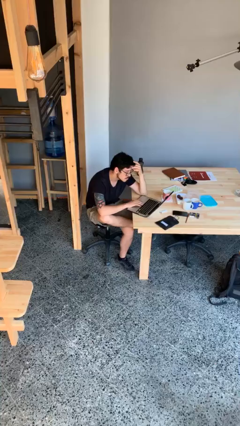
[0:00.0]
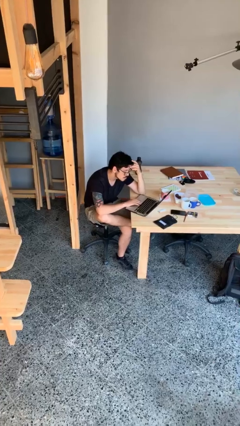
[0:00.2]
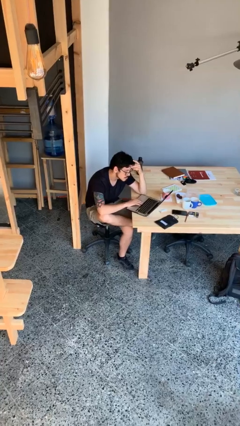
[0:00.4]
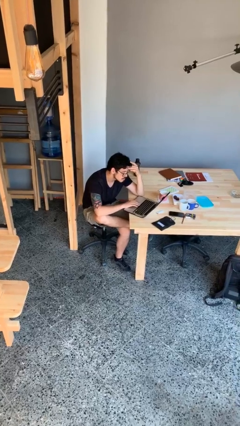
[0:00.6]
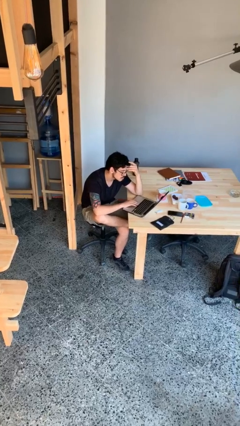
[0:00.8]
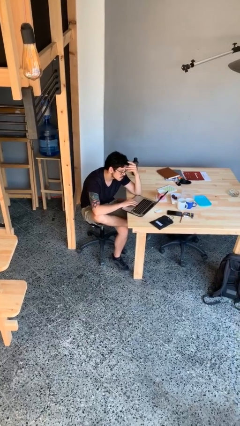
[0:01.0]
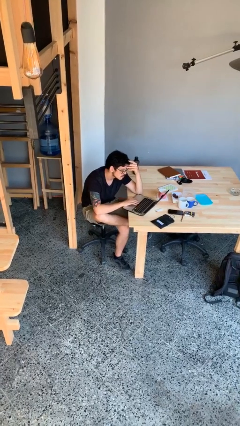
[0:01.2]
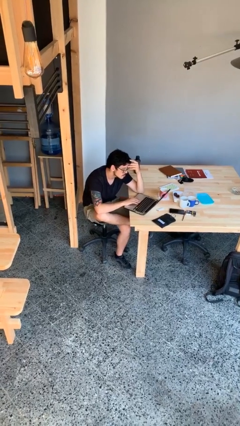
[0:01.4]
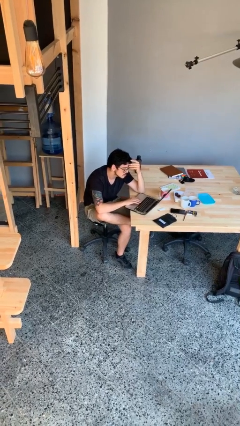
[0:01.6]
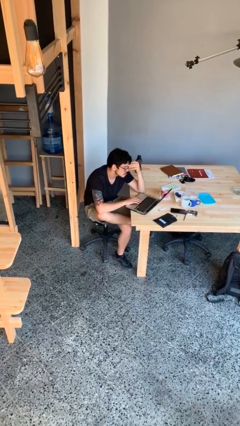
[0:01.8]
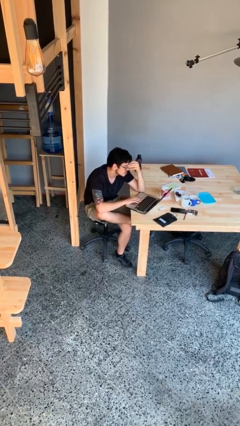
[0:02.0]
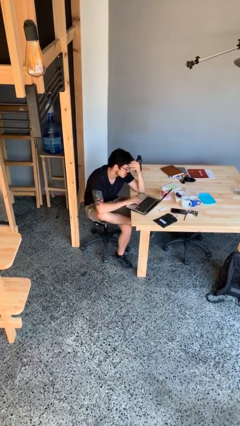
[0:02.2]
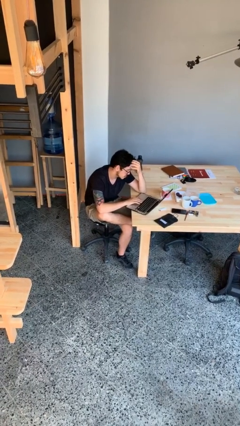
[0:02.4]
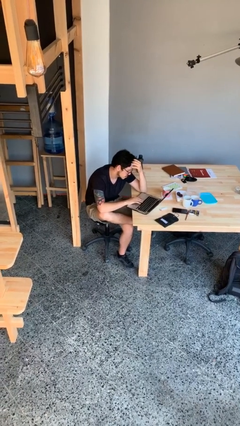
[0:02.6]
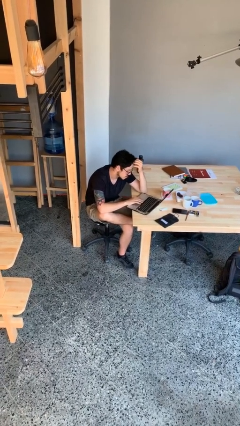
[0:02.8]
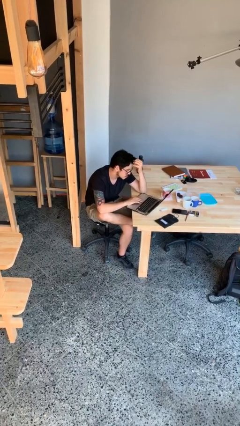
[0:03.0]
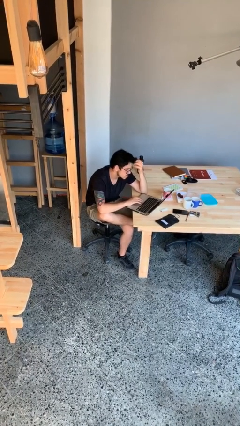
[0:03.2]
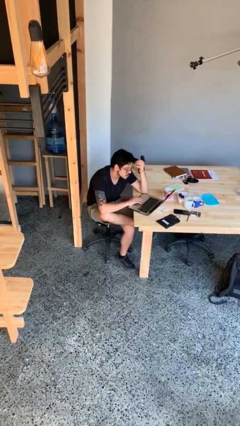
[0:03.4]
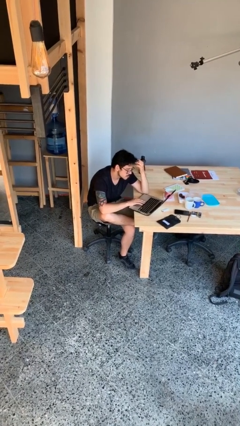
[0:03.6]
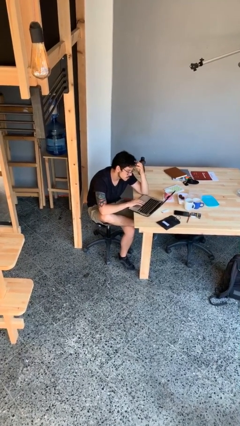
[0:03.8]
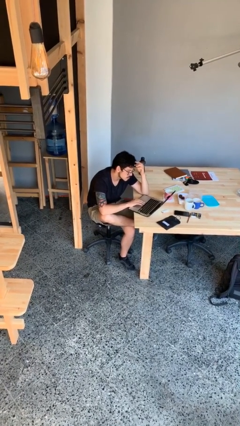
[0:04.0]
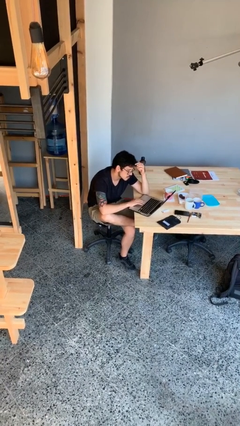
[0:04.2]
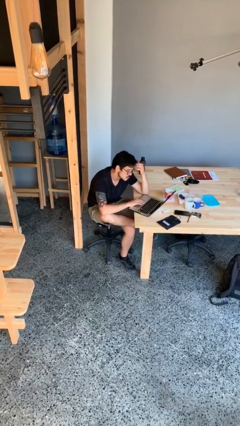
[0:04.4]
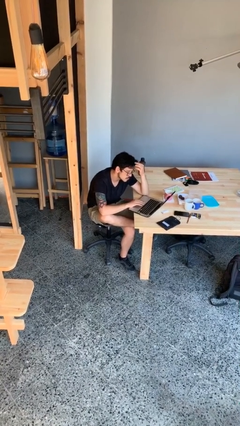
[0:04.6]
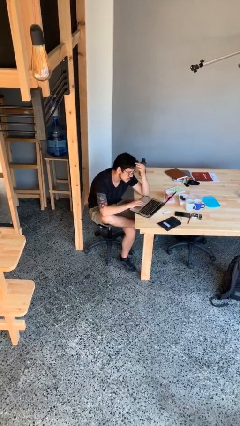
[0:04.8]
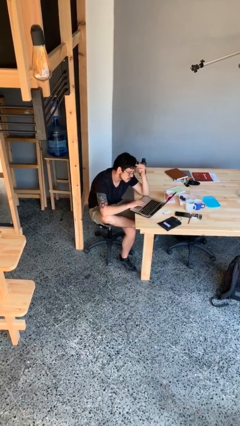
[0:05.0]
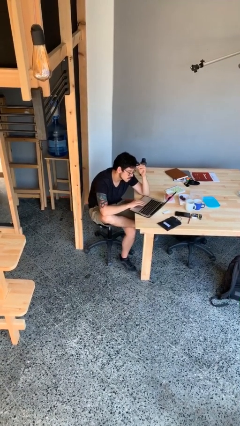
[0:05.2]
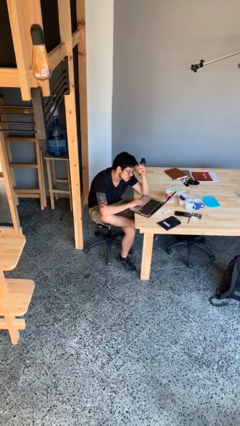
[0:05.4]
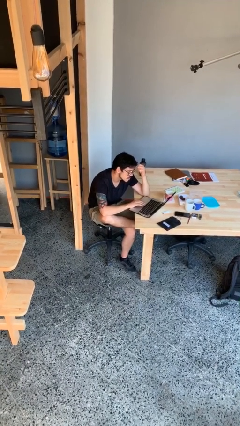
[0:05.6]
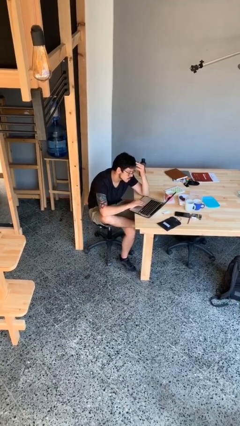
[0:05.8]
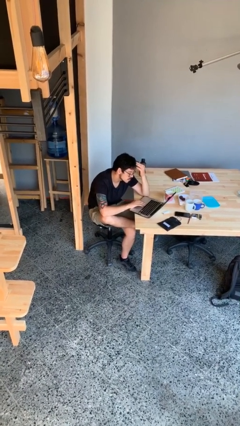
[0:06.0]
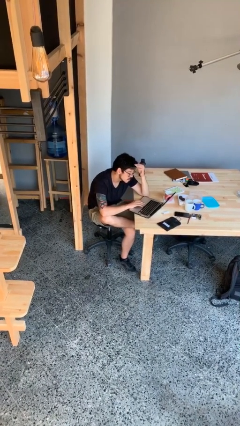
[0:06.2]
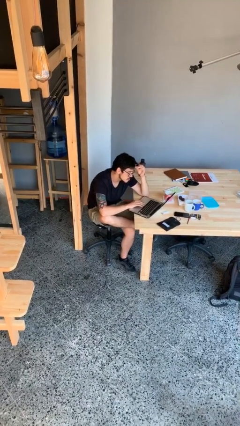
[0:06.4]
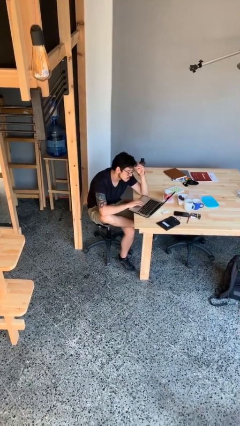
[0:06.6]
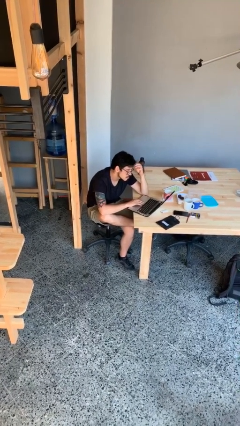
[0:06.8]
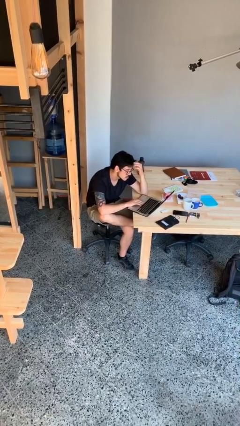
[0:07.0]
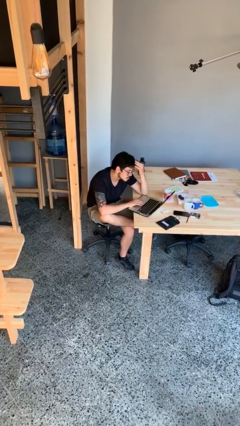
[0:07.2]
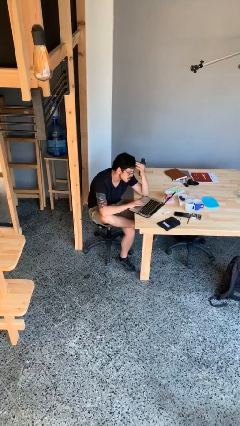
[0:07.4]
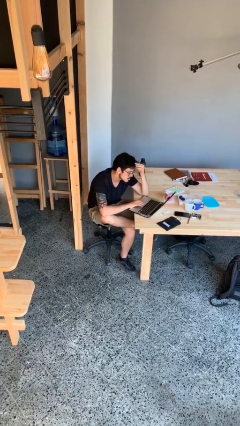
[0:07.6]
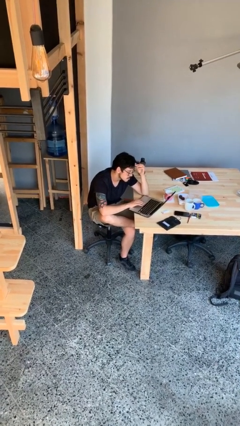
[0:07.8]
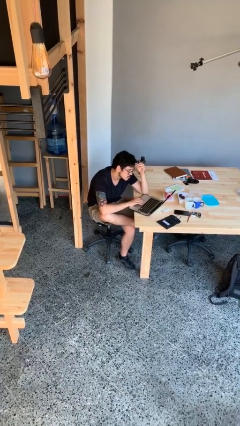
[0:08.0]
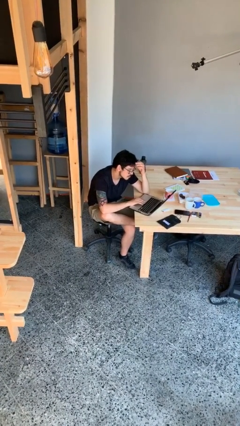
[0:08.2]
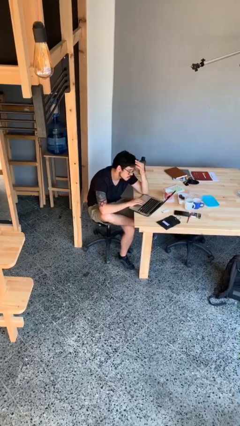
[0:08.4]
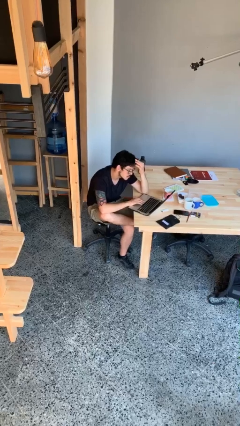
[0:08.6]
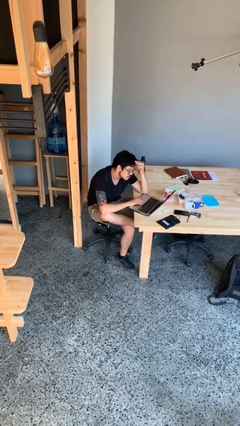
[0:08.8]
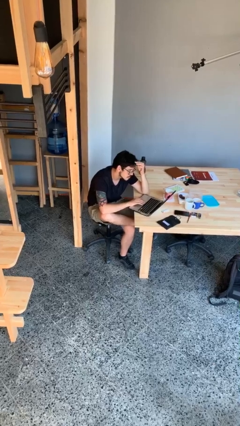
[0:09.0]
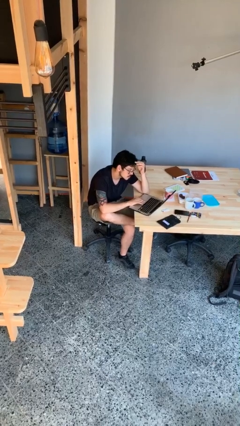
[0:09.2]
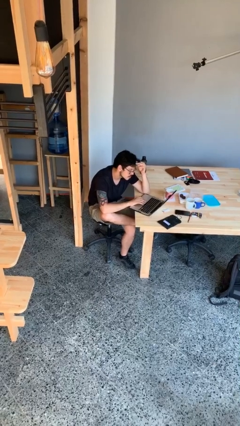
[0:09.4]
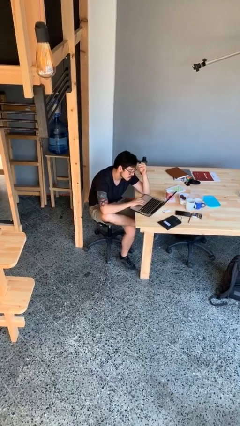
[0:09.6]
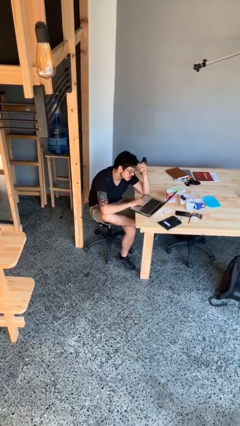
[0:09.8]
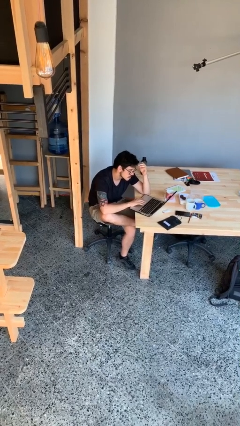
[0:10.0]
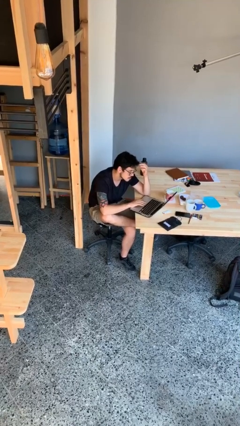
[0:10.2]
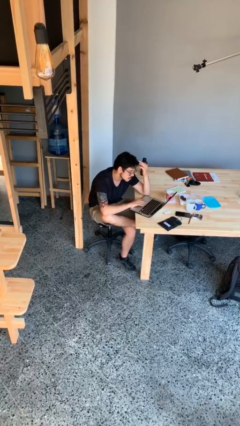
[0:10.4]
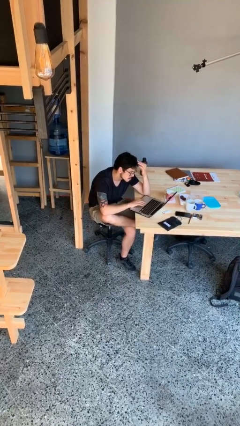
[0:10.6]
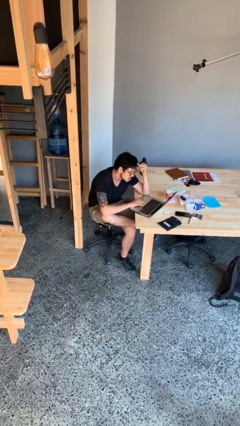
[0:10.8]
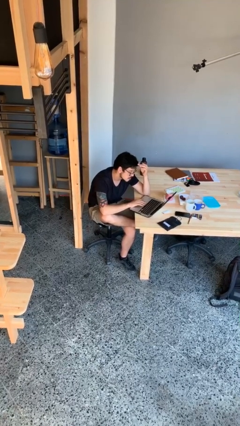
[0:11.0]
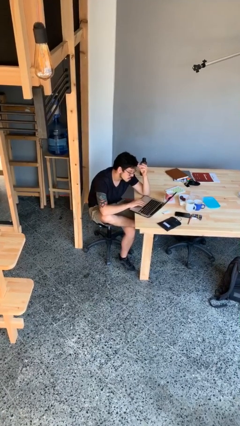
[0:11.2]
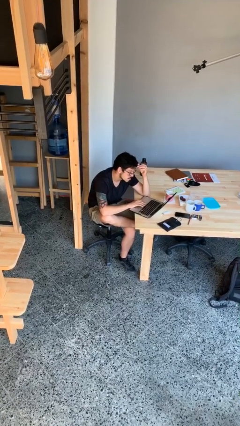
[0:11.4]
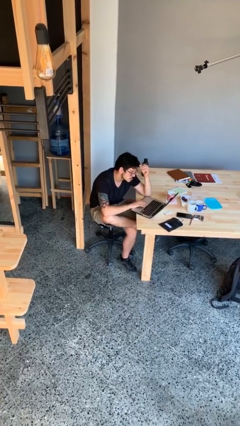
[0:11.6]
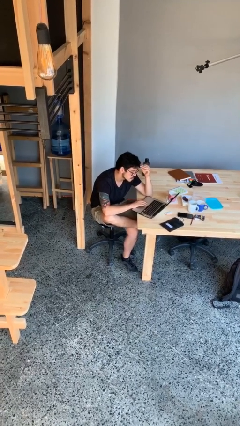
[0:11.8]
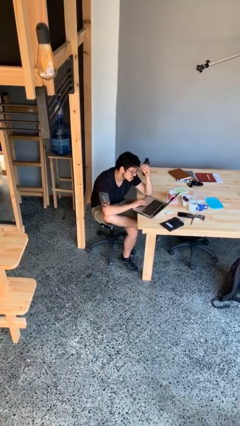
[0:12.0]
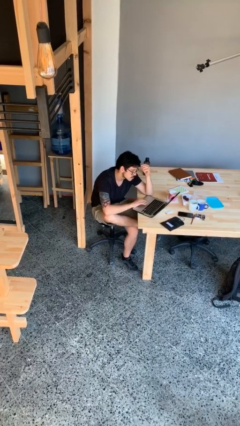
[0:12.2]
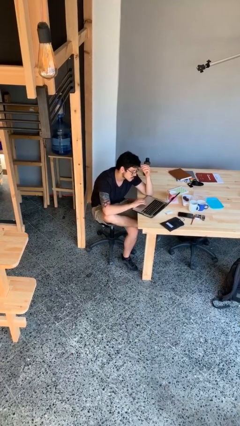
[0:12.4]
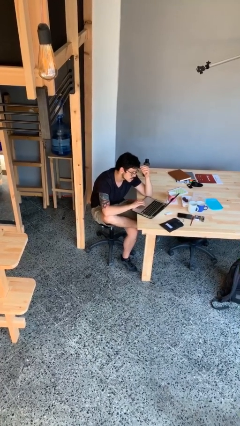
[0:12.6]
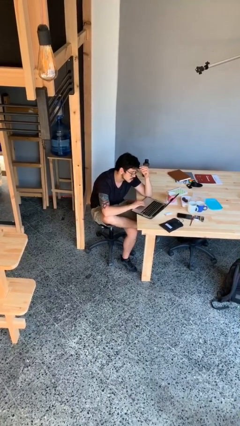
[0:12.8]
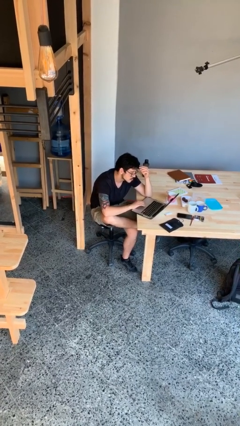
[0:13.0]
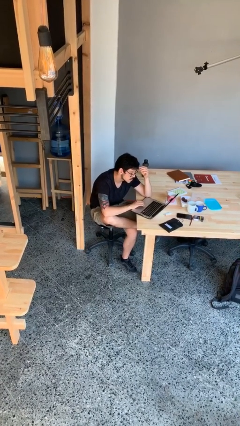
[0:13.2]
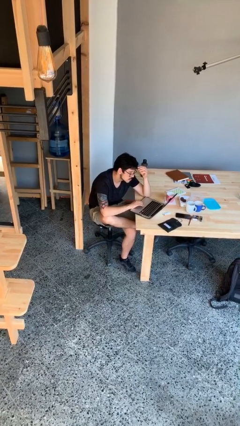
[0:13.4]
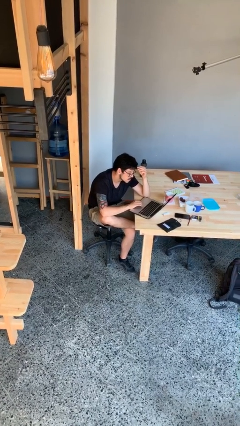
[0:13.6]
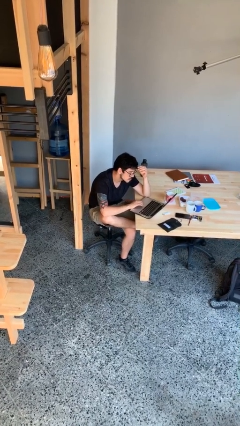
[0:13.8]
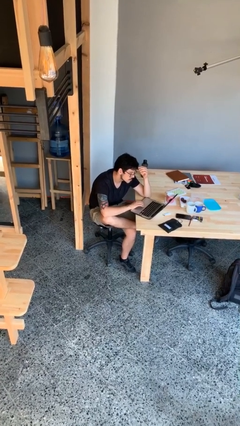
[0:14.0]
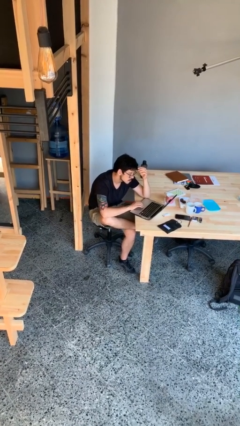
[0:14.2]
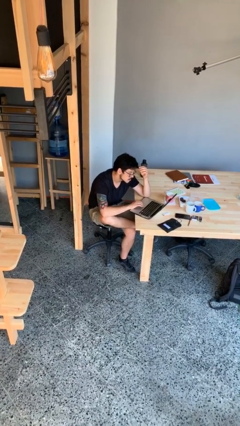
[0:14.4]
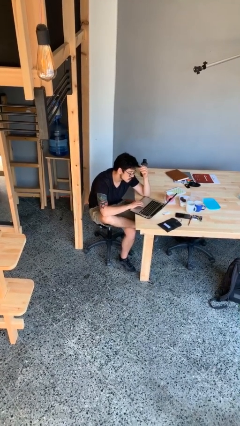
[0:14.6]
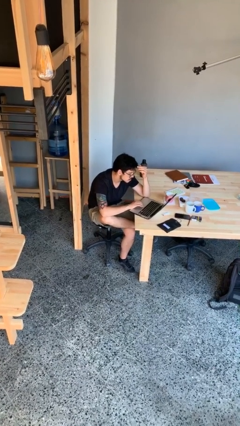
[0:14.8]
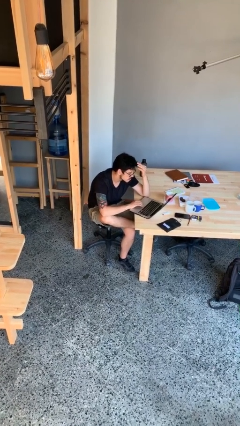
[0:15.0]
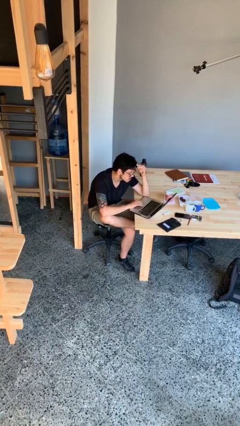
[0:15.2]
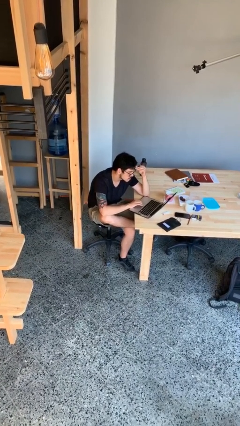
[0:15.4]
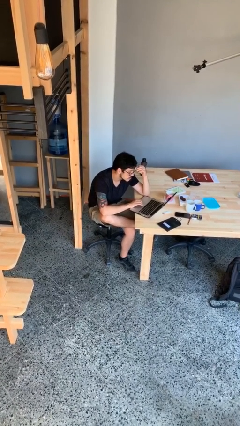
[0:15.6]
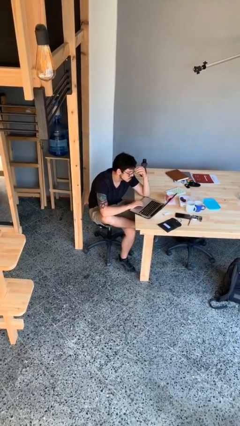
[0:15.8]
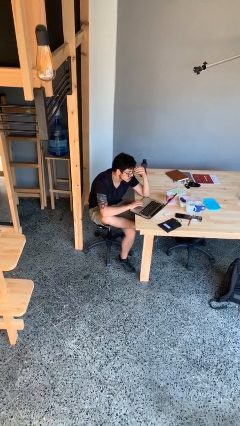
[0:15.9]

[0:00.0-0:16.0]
person interacts with laptop

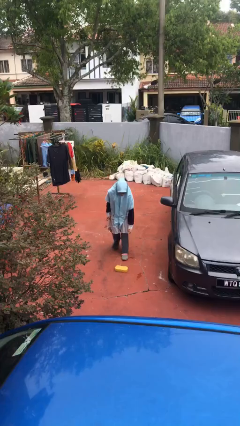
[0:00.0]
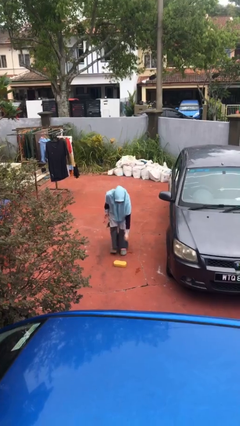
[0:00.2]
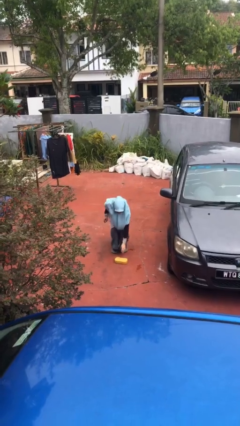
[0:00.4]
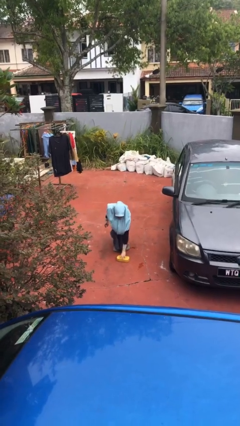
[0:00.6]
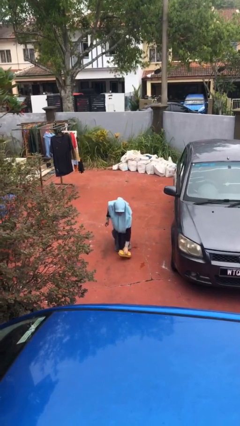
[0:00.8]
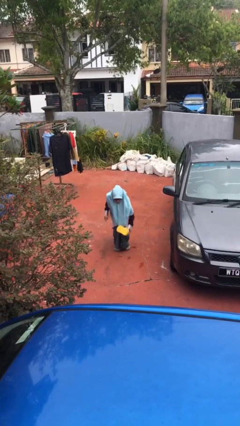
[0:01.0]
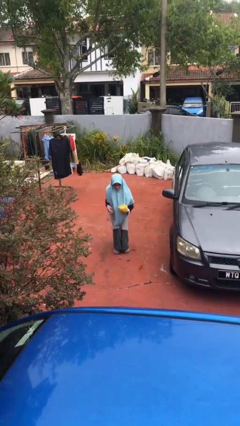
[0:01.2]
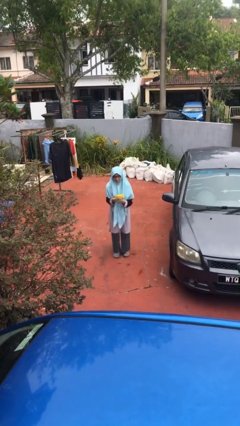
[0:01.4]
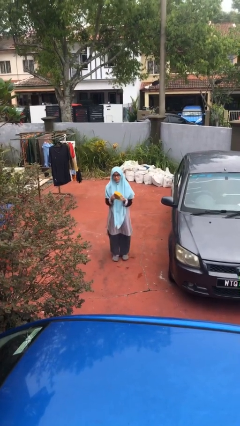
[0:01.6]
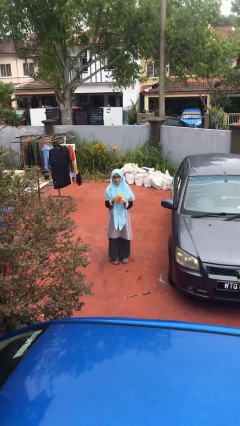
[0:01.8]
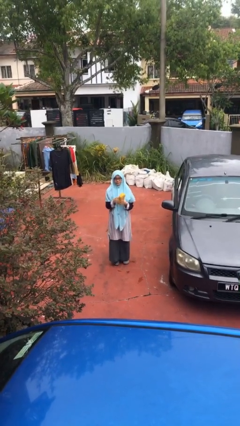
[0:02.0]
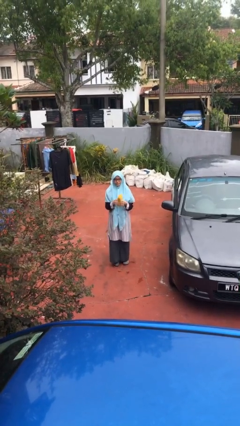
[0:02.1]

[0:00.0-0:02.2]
person picks up object from floor
